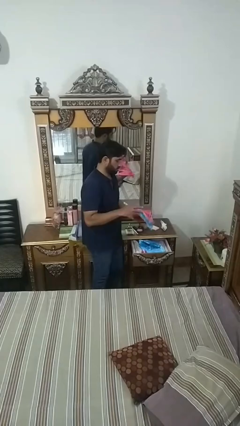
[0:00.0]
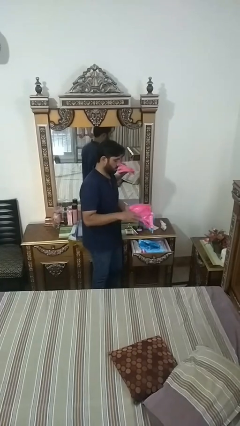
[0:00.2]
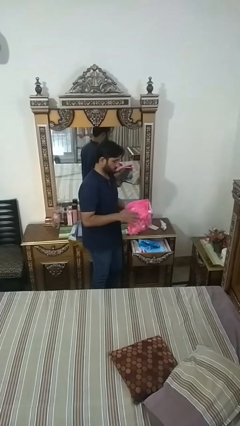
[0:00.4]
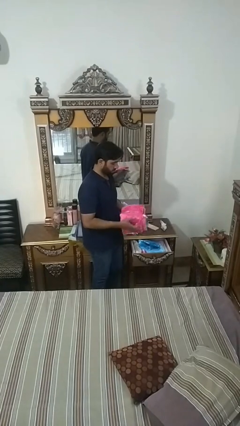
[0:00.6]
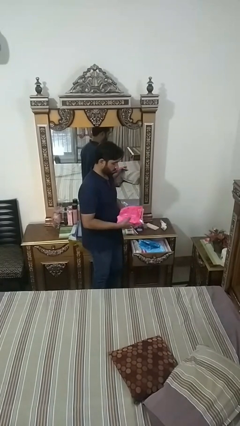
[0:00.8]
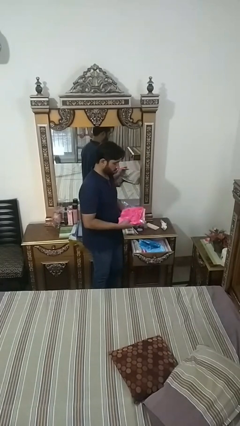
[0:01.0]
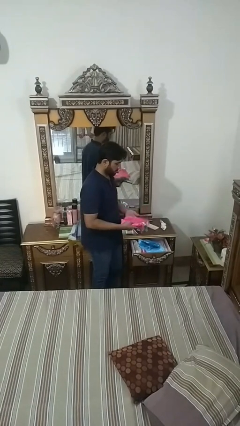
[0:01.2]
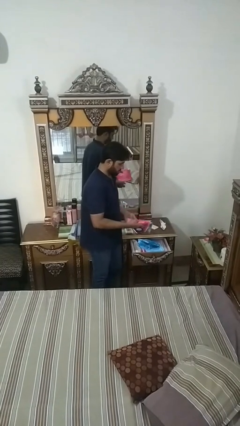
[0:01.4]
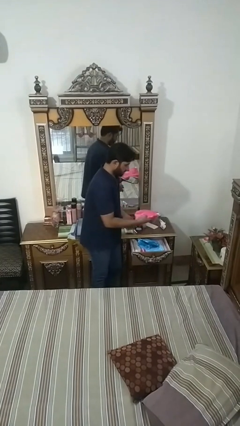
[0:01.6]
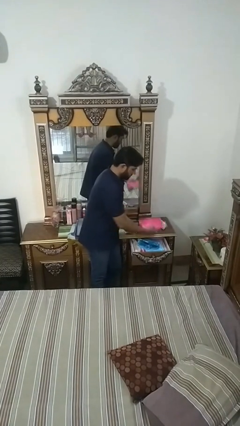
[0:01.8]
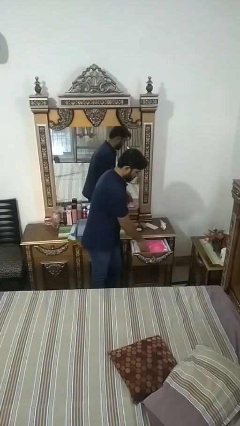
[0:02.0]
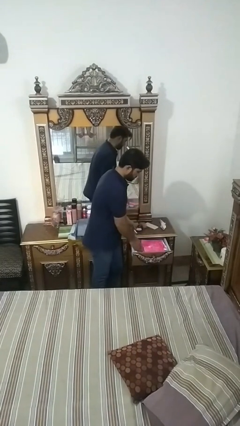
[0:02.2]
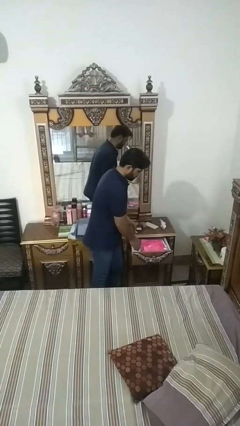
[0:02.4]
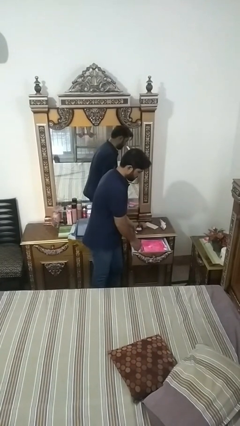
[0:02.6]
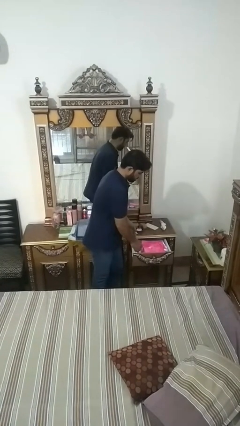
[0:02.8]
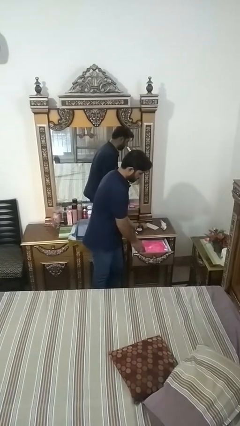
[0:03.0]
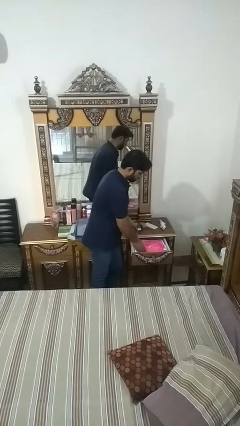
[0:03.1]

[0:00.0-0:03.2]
person puts clothes into dresser

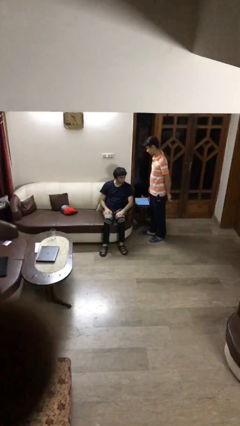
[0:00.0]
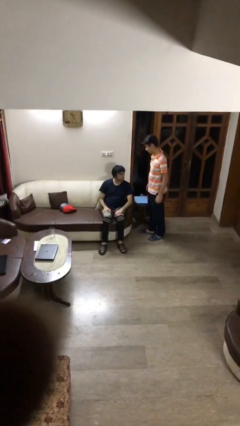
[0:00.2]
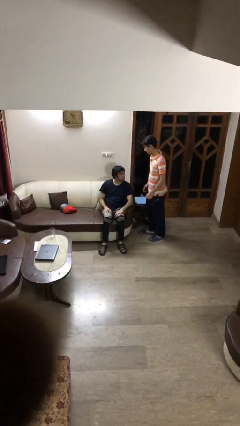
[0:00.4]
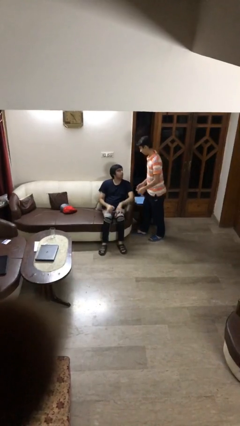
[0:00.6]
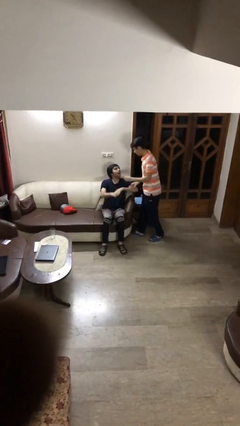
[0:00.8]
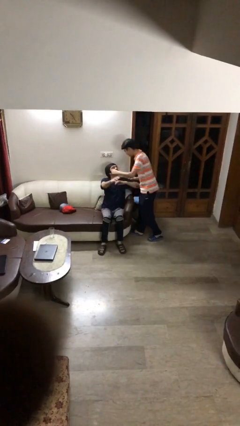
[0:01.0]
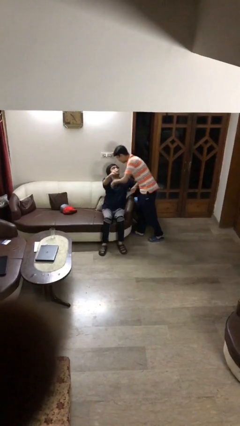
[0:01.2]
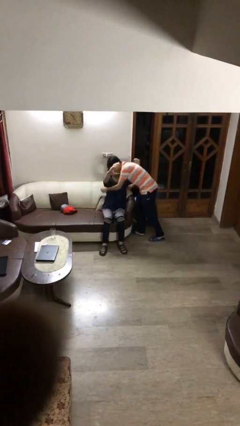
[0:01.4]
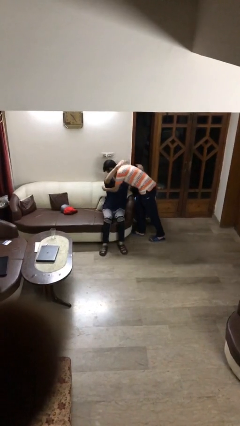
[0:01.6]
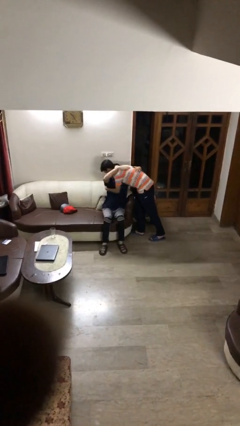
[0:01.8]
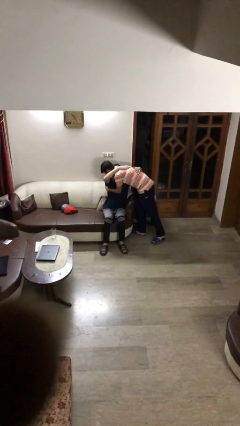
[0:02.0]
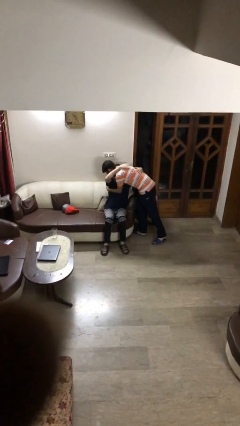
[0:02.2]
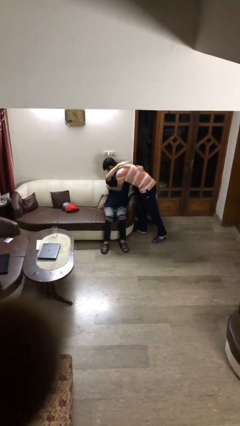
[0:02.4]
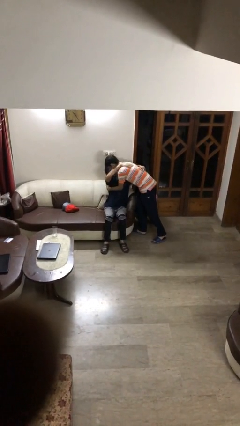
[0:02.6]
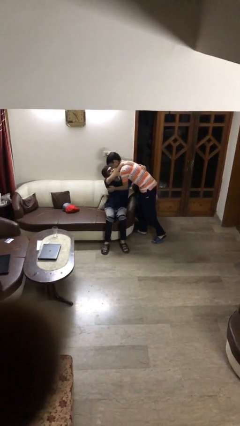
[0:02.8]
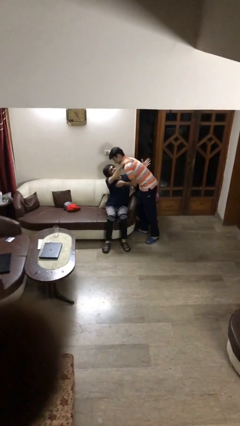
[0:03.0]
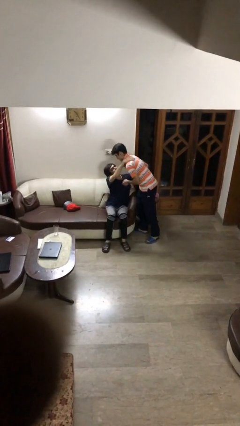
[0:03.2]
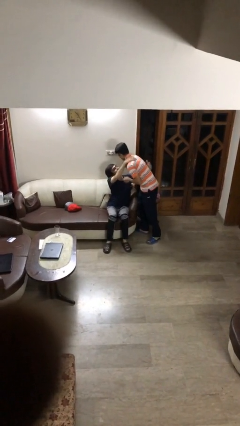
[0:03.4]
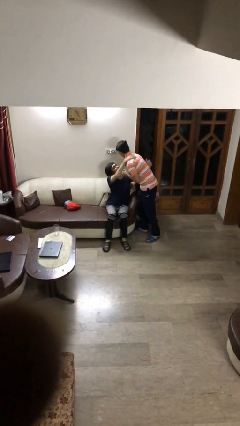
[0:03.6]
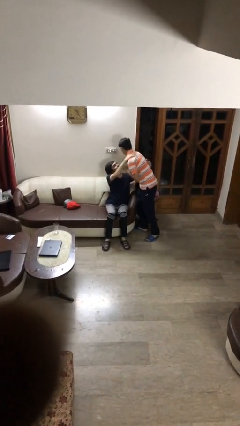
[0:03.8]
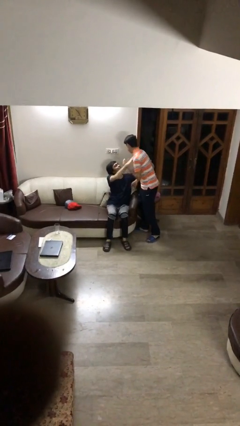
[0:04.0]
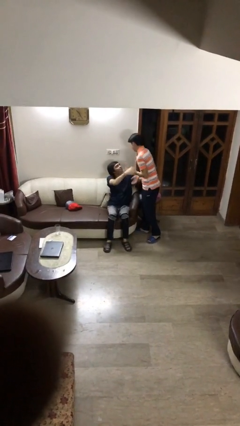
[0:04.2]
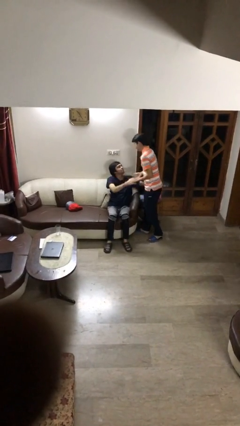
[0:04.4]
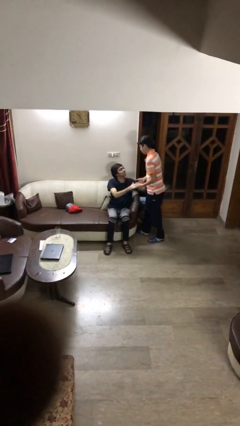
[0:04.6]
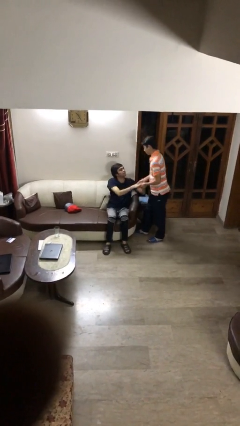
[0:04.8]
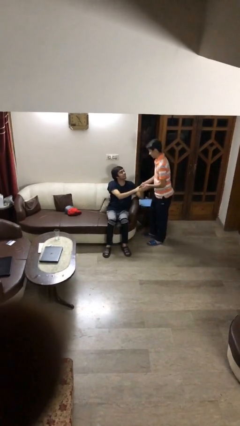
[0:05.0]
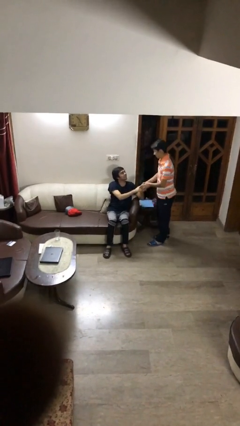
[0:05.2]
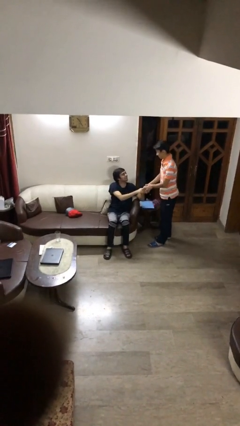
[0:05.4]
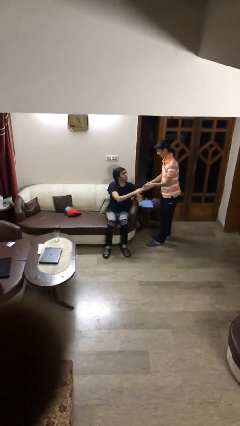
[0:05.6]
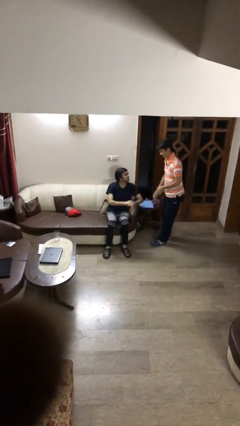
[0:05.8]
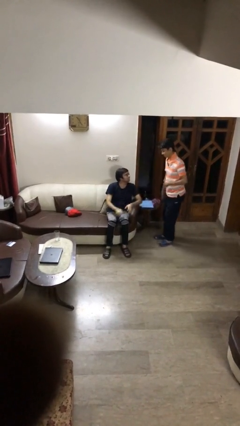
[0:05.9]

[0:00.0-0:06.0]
person embraces person

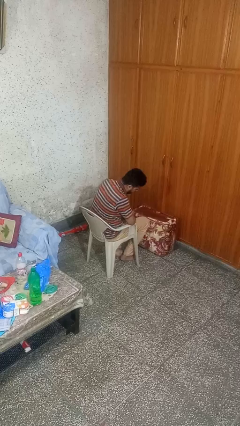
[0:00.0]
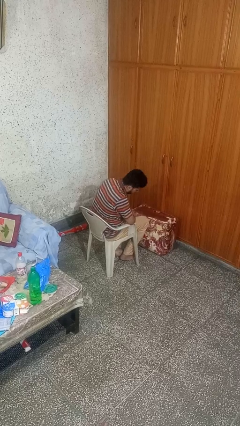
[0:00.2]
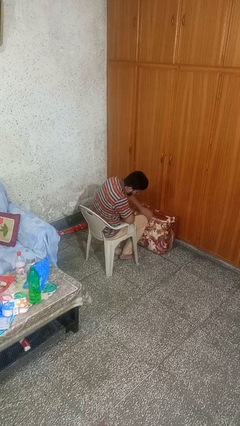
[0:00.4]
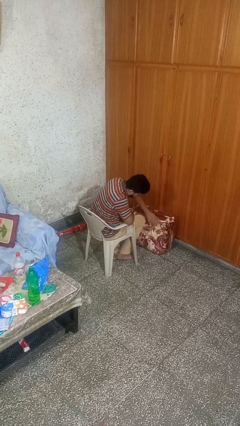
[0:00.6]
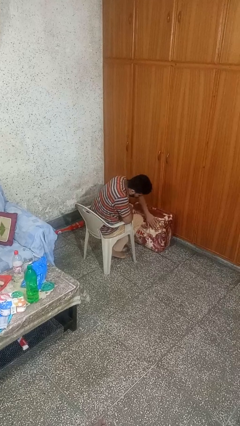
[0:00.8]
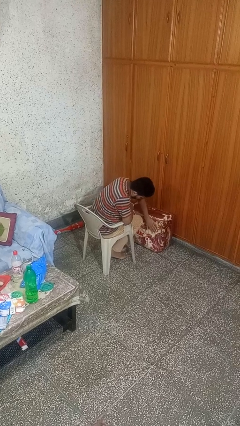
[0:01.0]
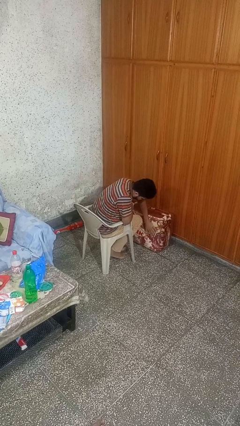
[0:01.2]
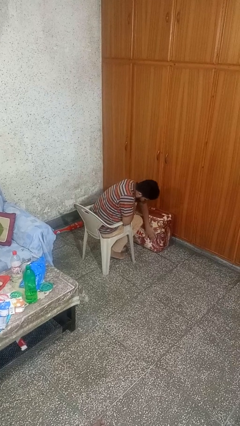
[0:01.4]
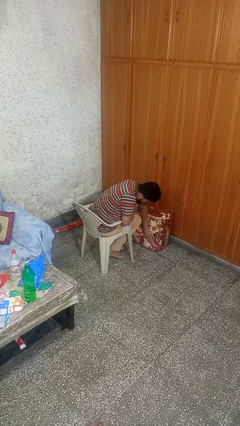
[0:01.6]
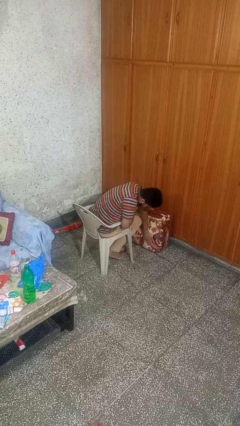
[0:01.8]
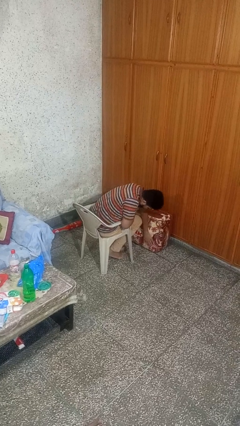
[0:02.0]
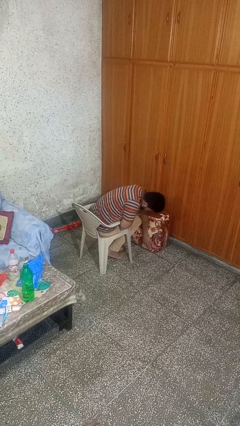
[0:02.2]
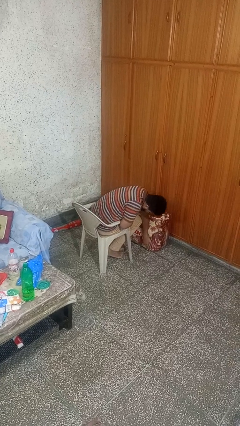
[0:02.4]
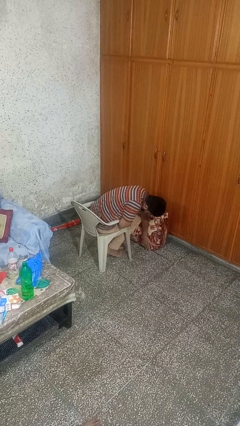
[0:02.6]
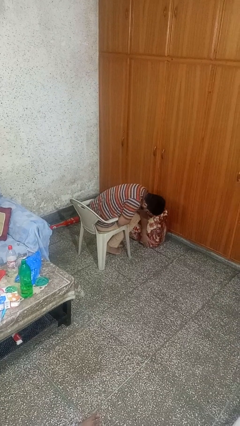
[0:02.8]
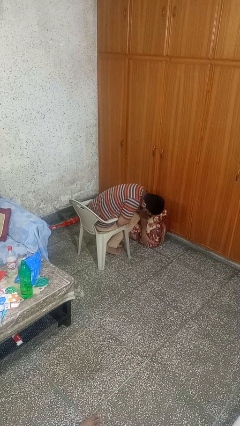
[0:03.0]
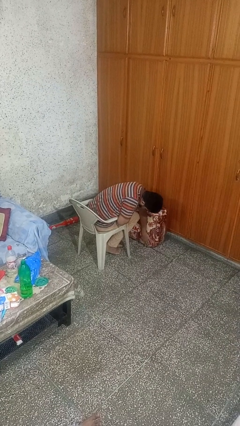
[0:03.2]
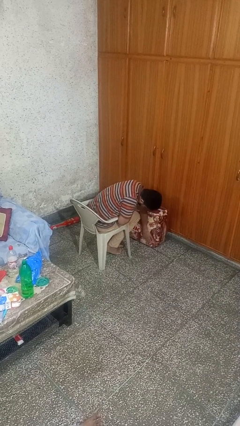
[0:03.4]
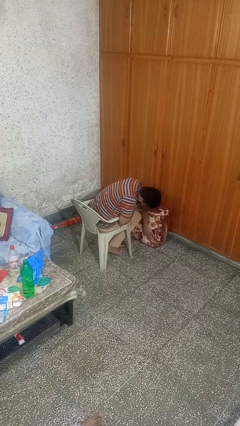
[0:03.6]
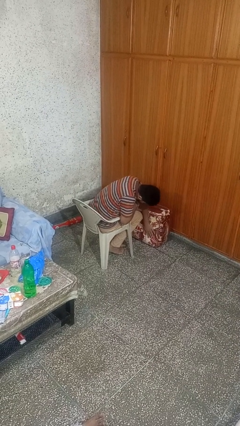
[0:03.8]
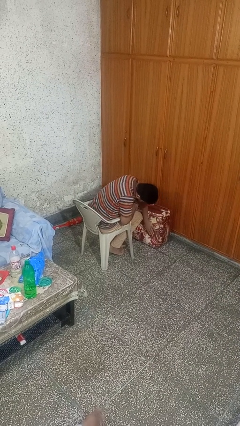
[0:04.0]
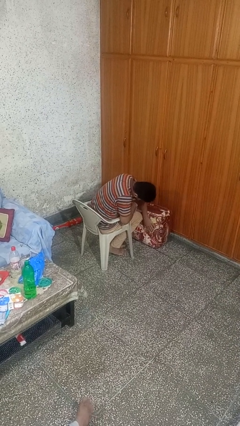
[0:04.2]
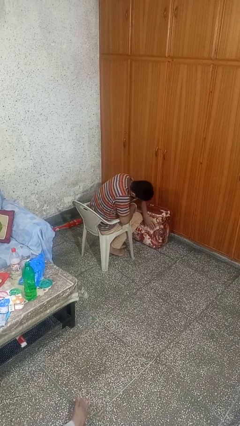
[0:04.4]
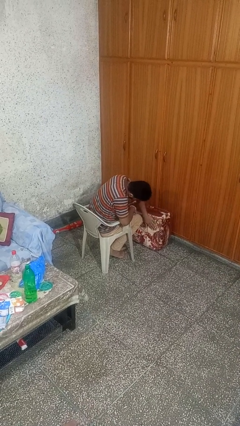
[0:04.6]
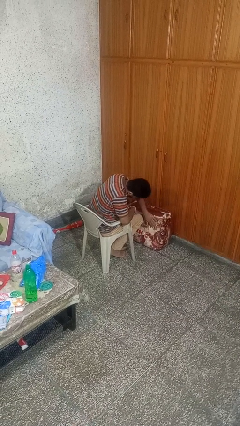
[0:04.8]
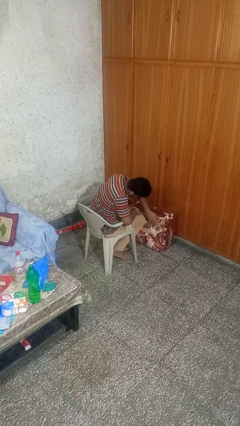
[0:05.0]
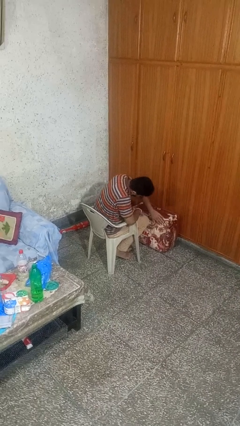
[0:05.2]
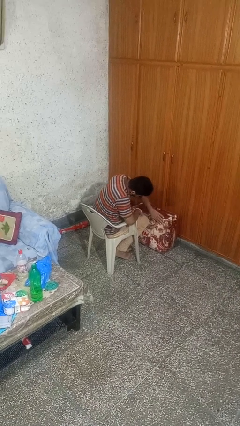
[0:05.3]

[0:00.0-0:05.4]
person waves hand over object

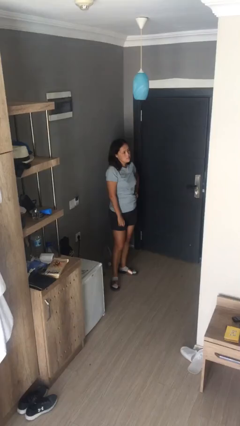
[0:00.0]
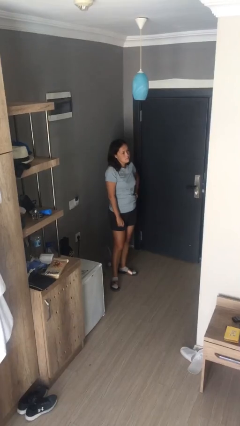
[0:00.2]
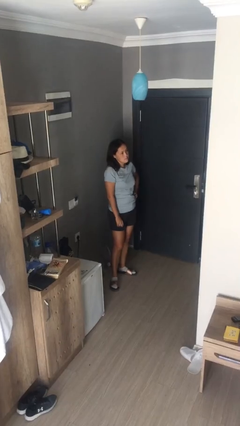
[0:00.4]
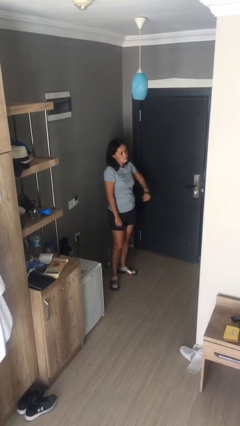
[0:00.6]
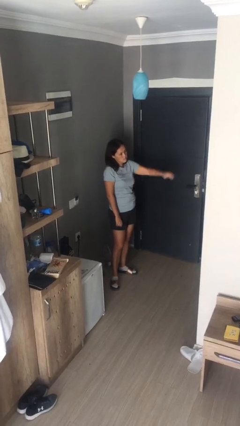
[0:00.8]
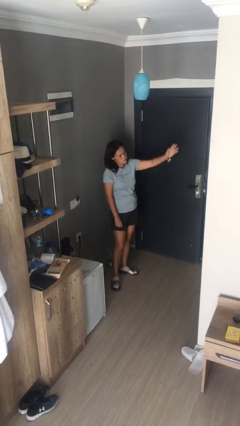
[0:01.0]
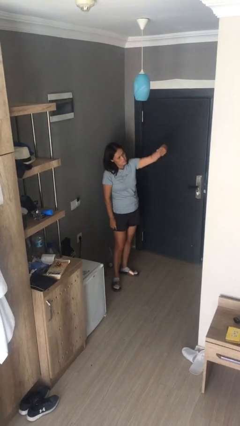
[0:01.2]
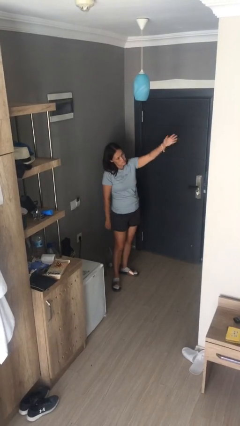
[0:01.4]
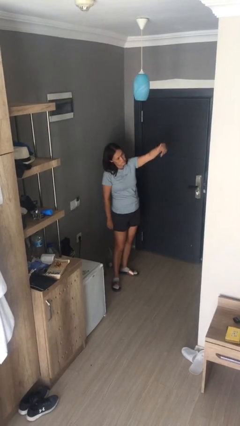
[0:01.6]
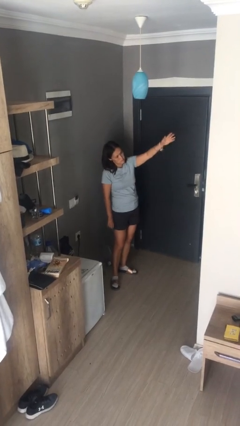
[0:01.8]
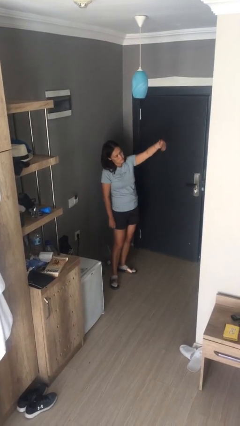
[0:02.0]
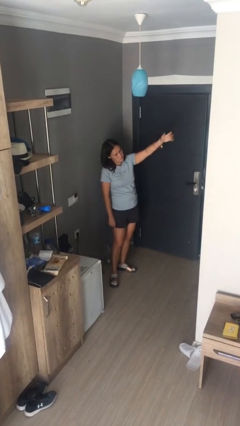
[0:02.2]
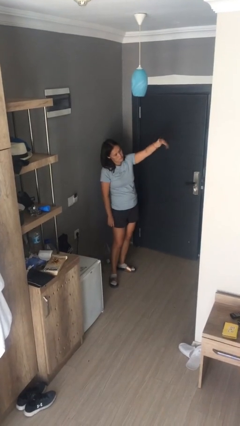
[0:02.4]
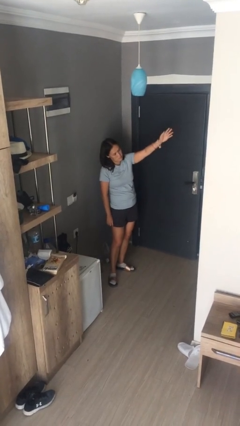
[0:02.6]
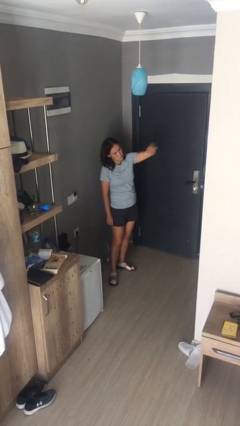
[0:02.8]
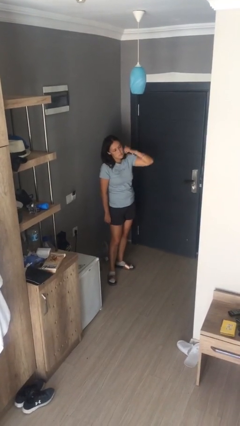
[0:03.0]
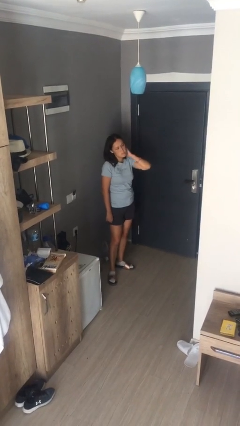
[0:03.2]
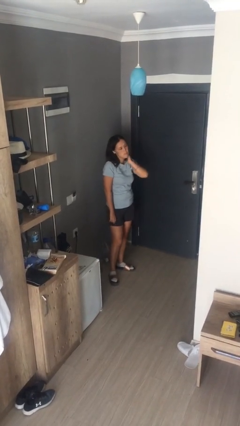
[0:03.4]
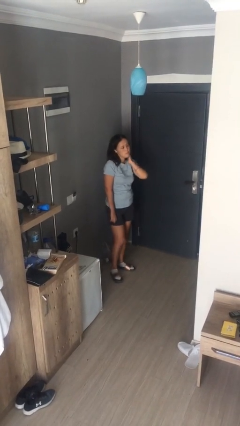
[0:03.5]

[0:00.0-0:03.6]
person gestures come here
